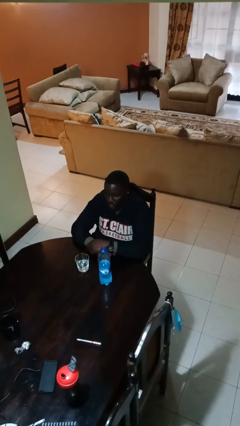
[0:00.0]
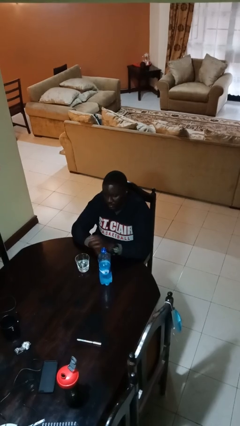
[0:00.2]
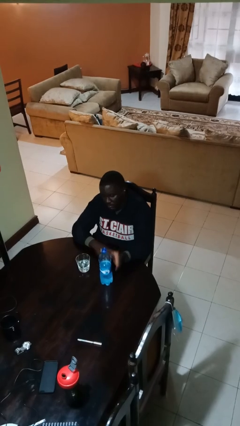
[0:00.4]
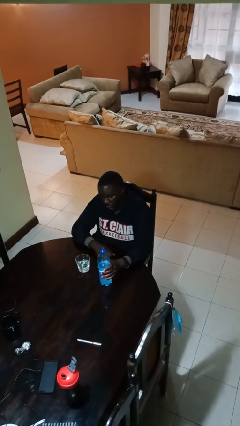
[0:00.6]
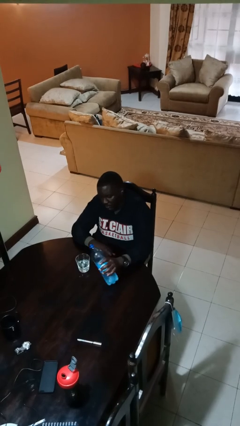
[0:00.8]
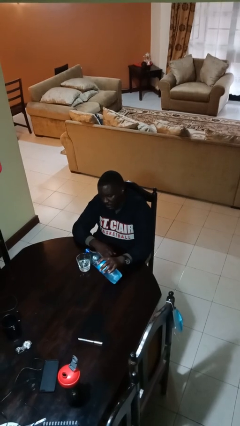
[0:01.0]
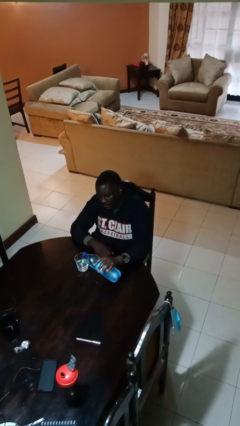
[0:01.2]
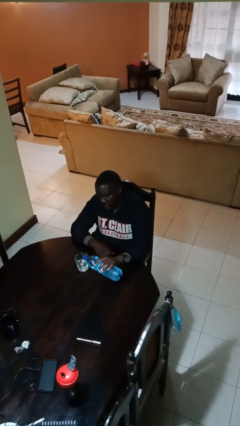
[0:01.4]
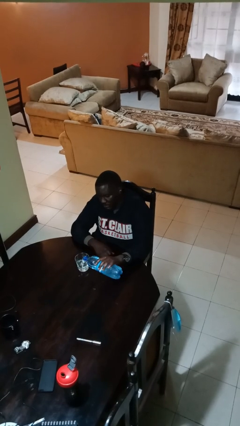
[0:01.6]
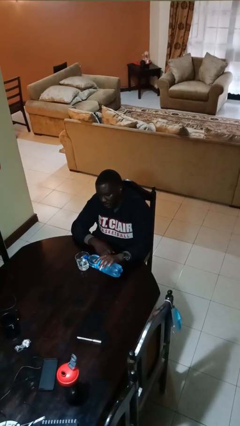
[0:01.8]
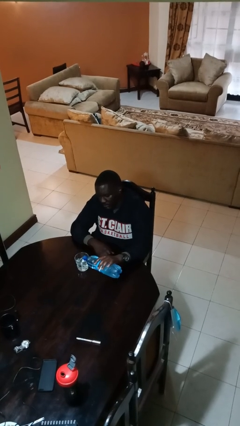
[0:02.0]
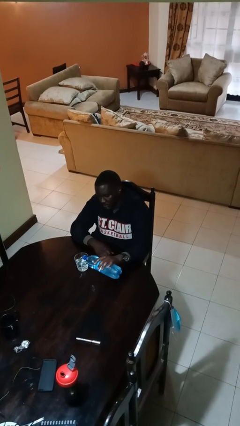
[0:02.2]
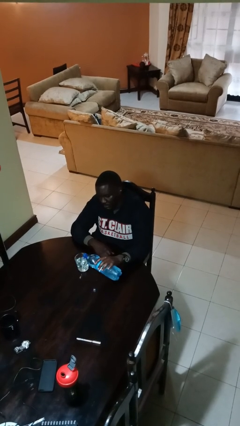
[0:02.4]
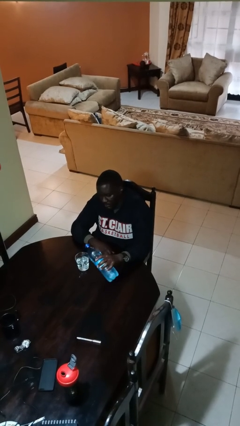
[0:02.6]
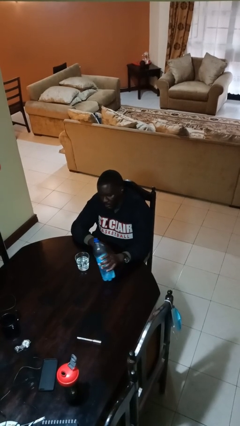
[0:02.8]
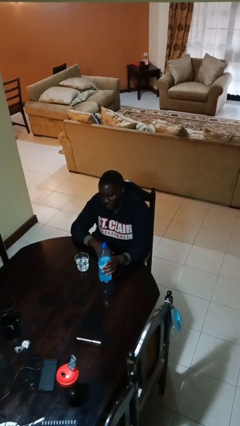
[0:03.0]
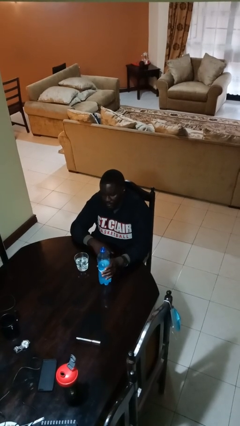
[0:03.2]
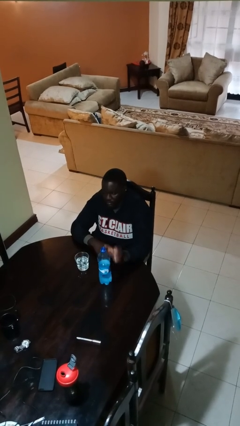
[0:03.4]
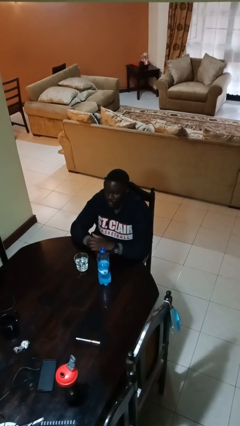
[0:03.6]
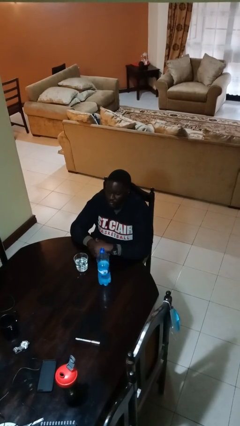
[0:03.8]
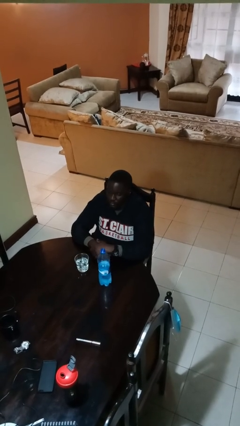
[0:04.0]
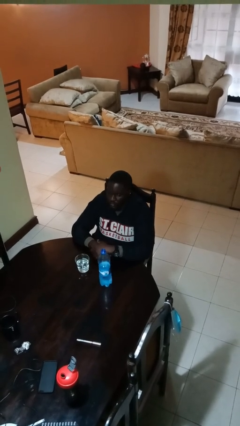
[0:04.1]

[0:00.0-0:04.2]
person pours liquid into cup

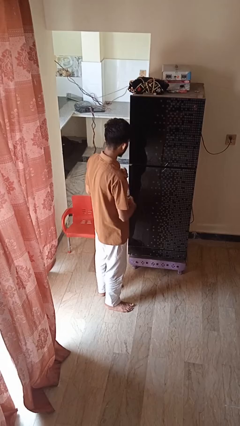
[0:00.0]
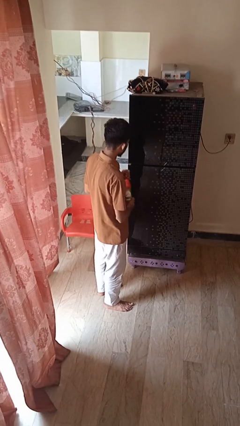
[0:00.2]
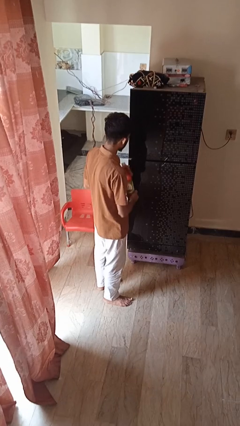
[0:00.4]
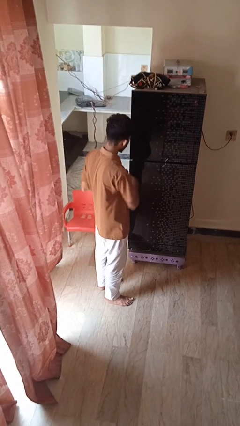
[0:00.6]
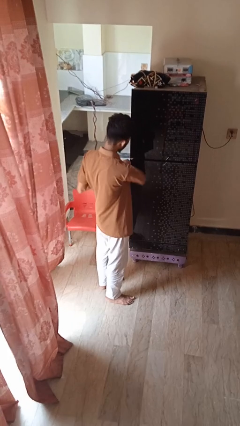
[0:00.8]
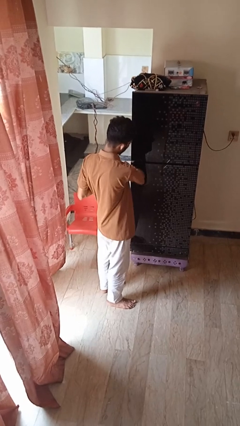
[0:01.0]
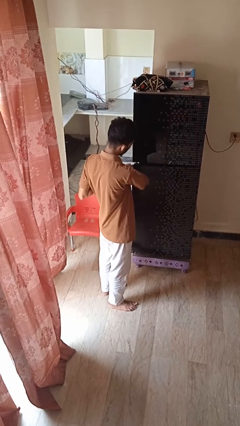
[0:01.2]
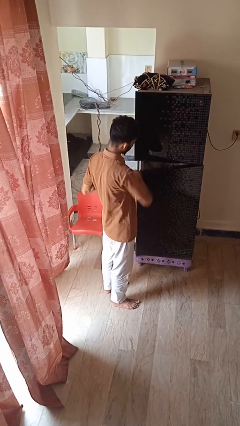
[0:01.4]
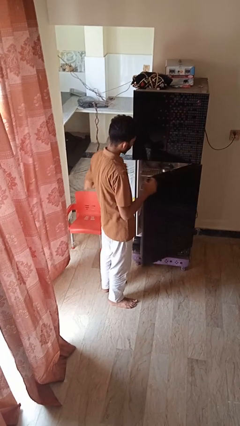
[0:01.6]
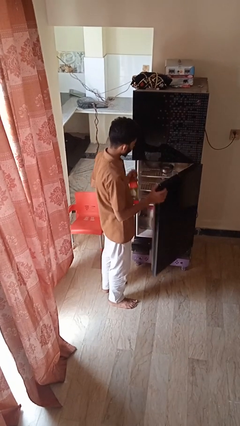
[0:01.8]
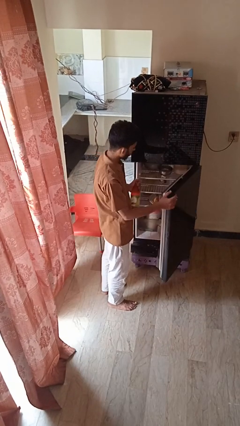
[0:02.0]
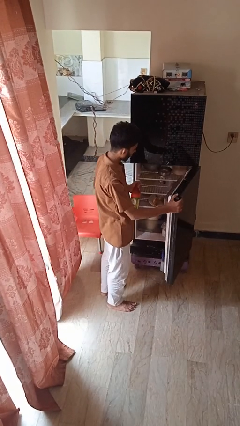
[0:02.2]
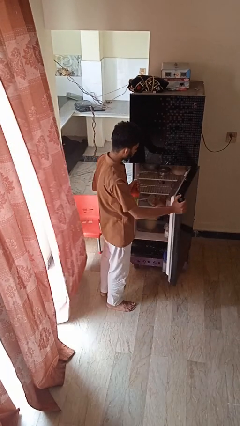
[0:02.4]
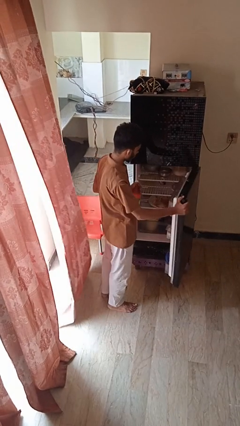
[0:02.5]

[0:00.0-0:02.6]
person opens refrigerator

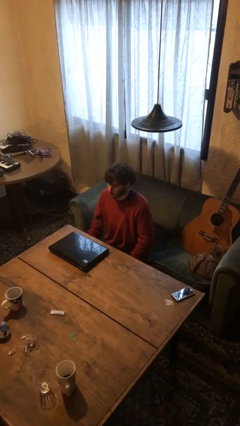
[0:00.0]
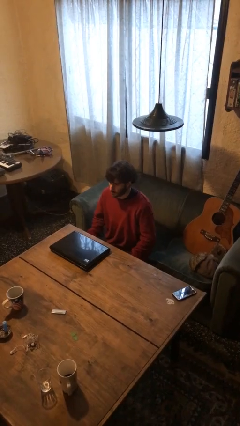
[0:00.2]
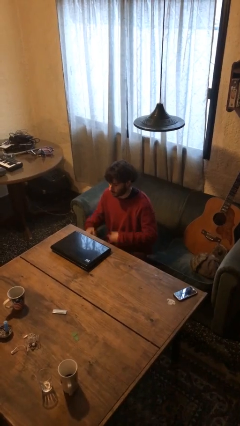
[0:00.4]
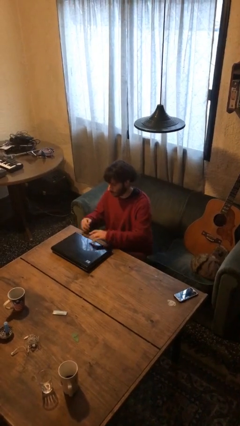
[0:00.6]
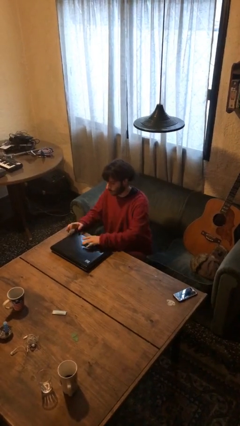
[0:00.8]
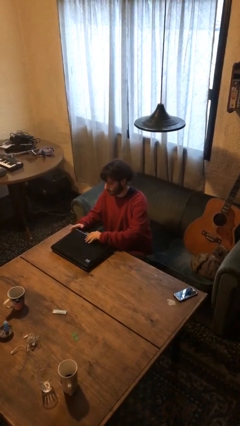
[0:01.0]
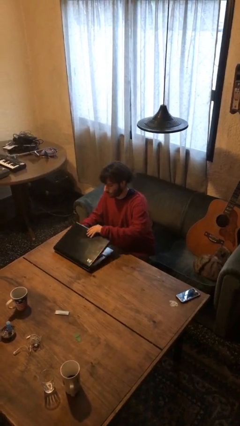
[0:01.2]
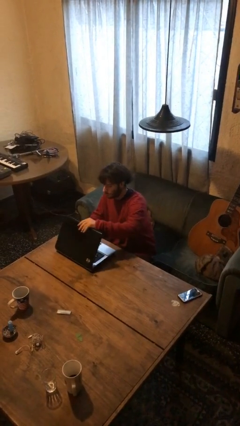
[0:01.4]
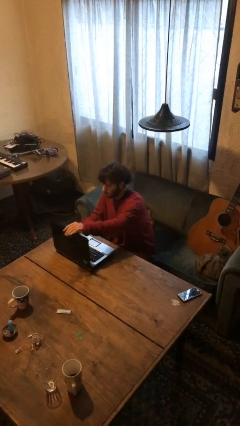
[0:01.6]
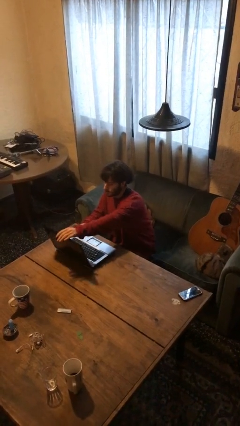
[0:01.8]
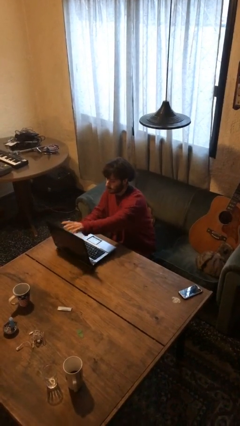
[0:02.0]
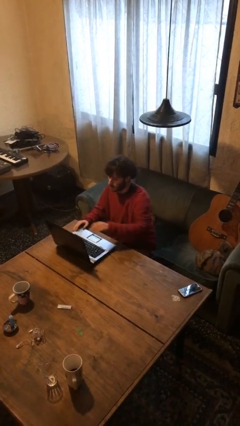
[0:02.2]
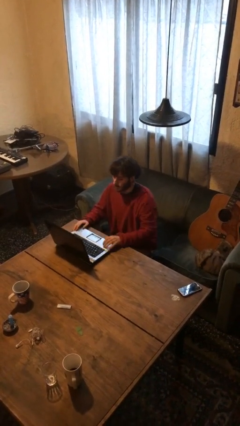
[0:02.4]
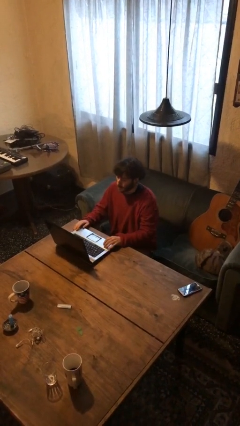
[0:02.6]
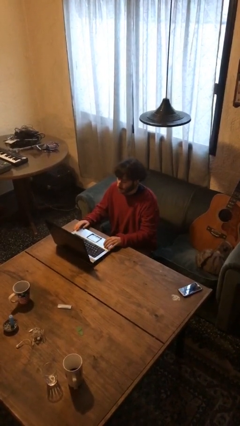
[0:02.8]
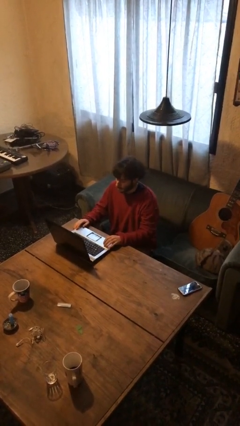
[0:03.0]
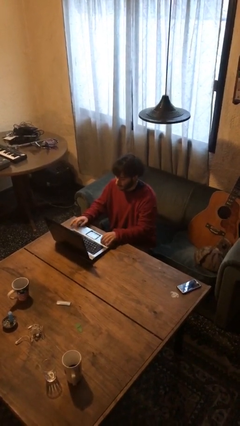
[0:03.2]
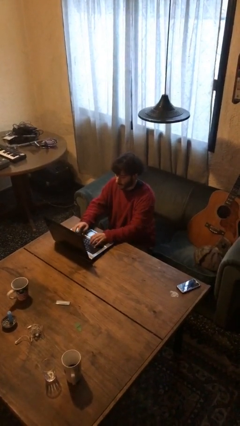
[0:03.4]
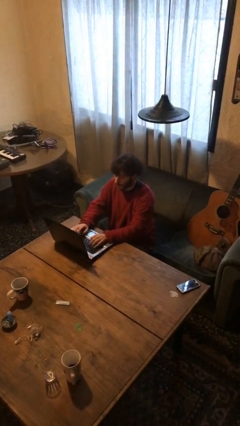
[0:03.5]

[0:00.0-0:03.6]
person opens laptop

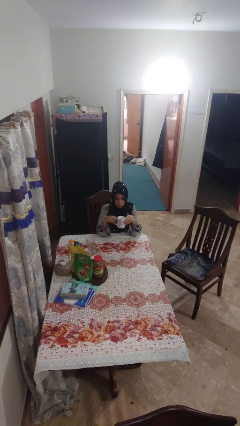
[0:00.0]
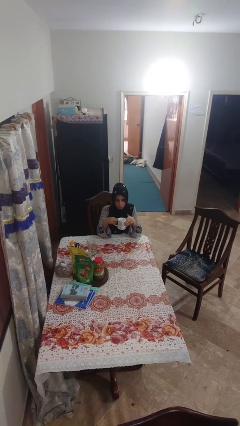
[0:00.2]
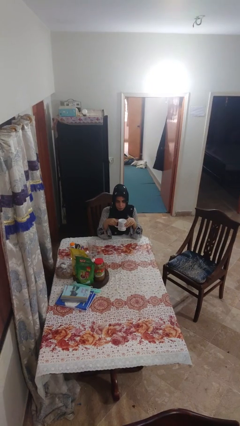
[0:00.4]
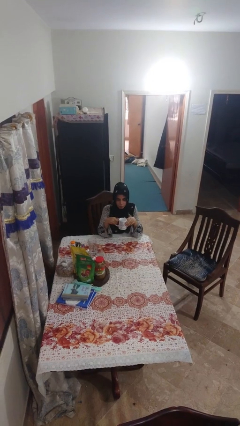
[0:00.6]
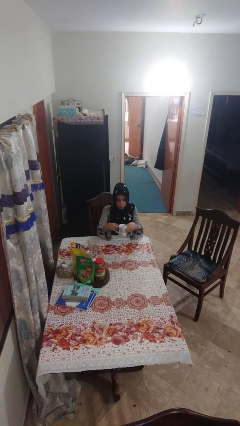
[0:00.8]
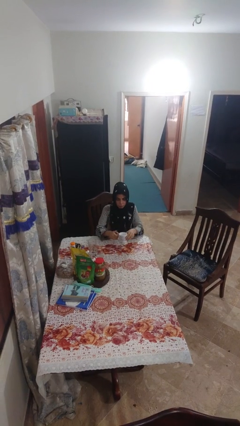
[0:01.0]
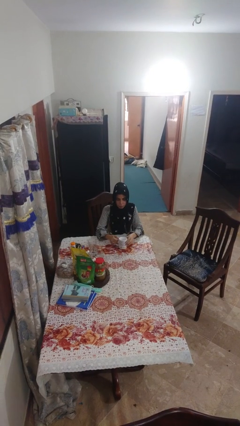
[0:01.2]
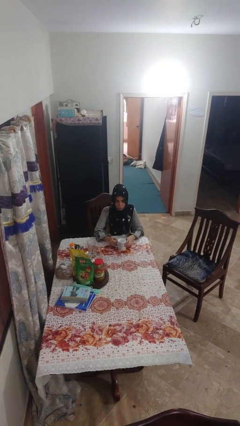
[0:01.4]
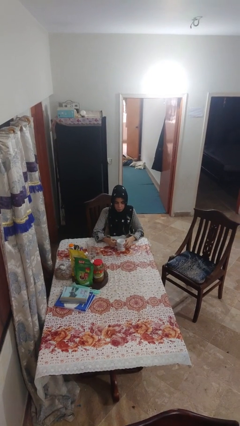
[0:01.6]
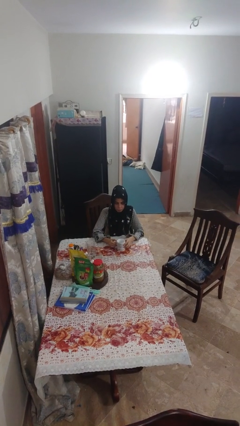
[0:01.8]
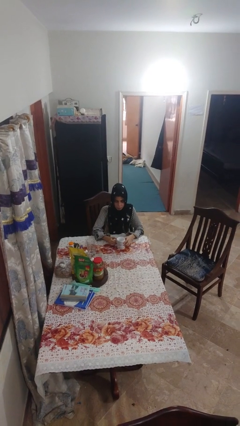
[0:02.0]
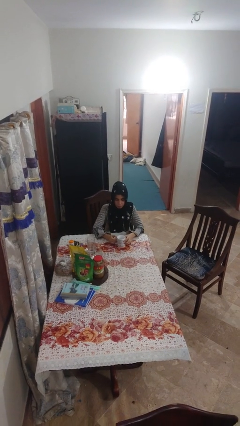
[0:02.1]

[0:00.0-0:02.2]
person puts down object on table

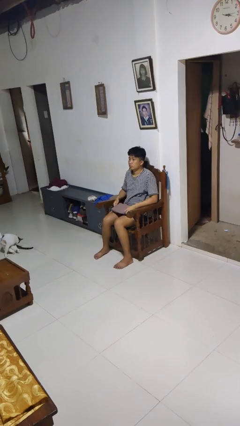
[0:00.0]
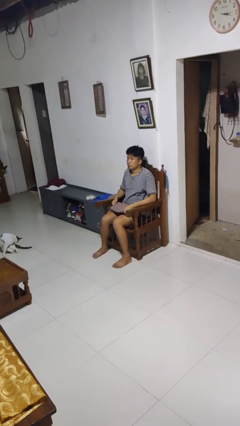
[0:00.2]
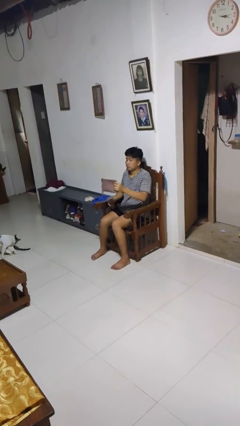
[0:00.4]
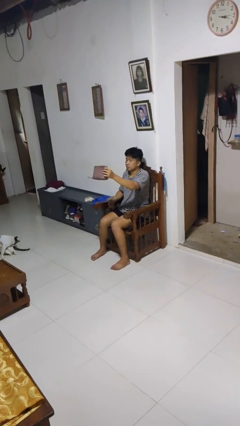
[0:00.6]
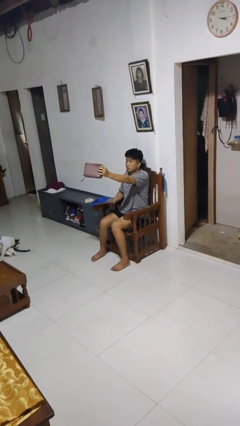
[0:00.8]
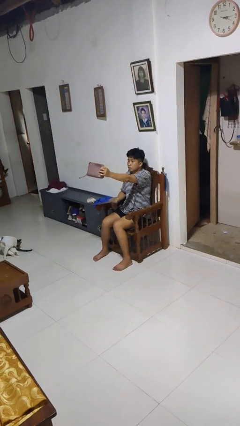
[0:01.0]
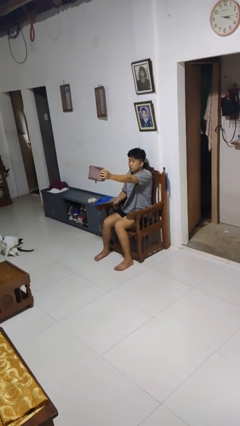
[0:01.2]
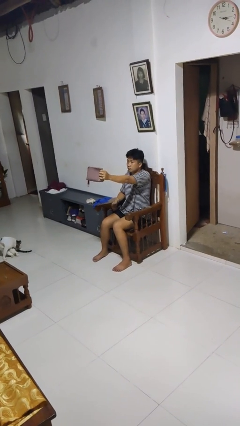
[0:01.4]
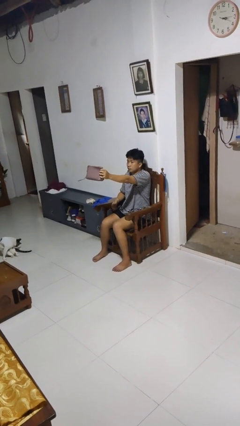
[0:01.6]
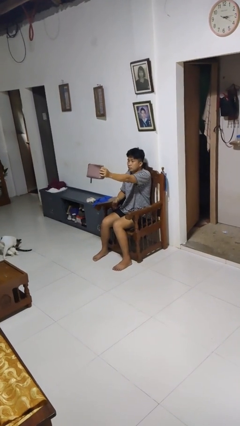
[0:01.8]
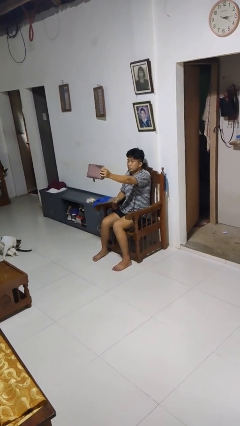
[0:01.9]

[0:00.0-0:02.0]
person holds object above head

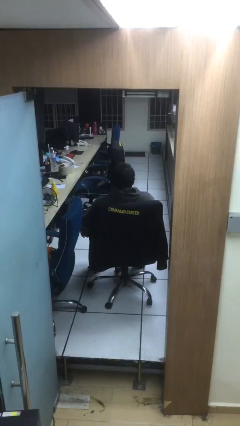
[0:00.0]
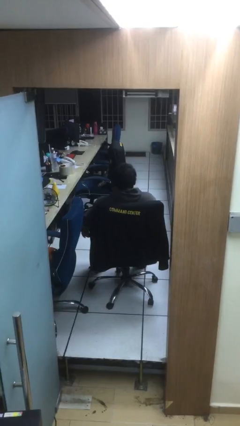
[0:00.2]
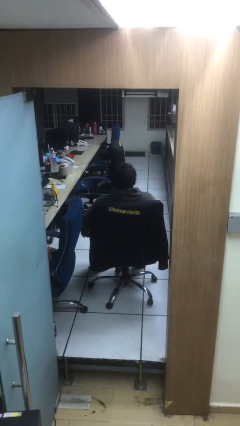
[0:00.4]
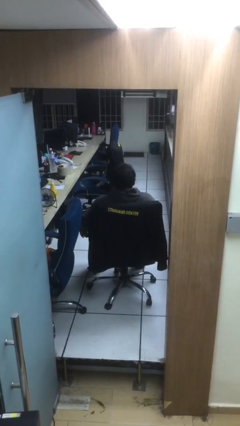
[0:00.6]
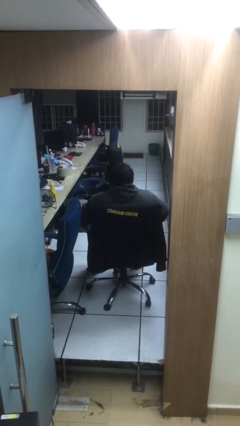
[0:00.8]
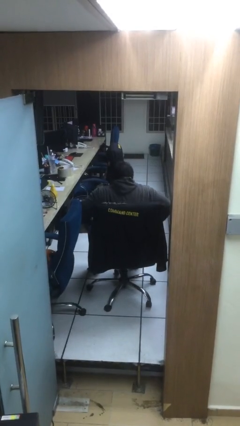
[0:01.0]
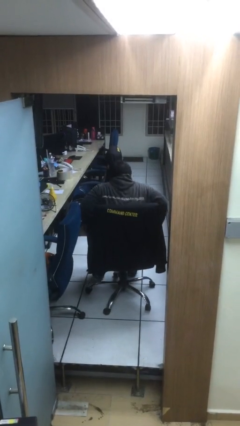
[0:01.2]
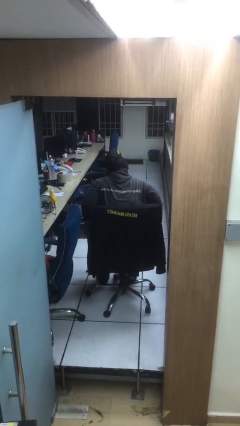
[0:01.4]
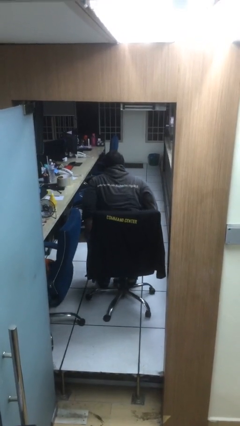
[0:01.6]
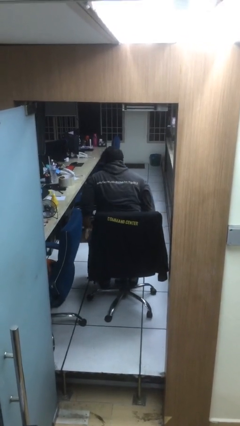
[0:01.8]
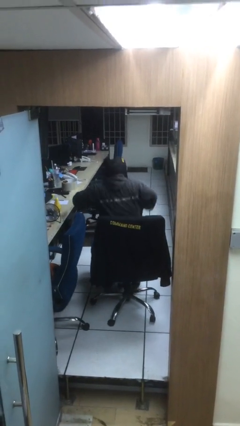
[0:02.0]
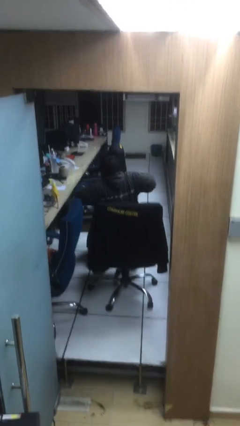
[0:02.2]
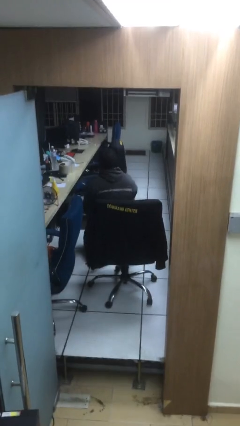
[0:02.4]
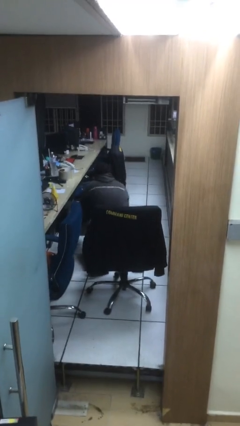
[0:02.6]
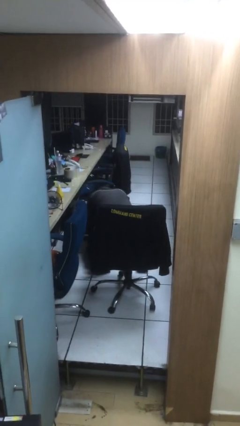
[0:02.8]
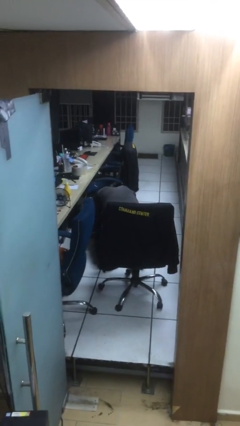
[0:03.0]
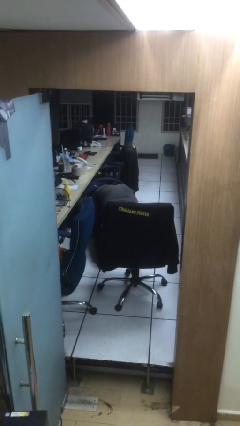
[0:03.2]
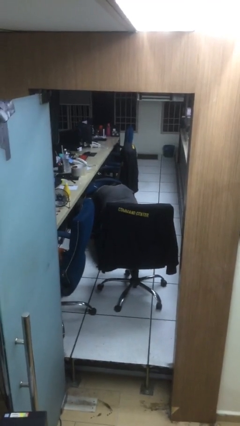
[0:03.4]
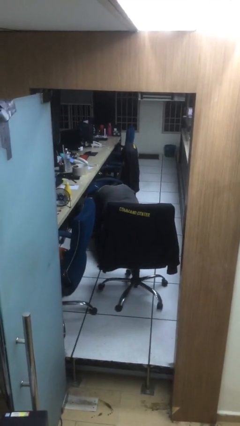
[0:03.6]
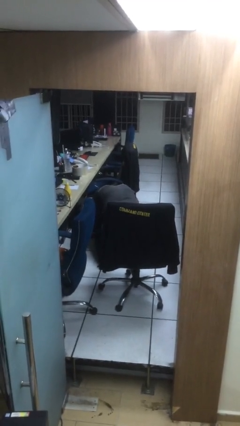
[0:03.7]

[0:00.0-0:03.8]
person falls from chair
